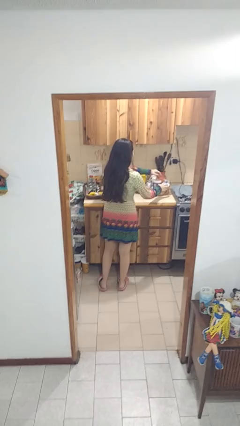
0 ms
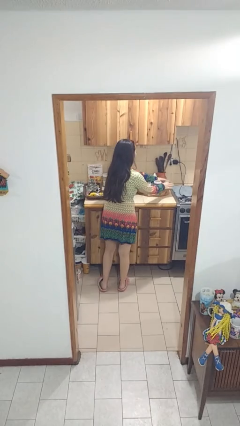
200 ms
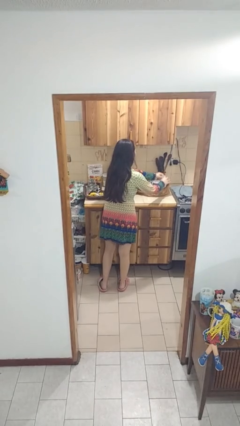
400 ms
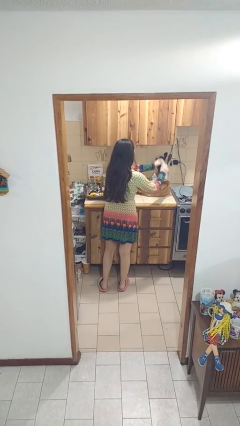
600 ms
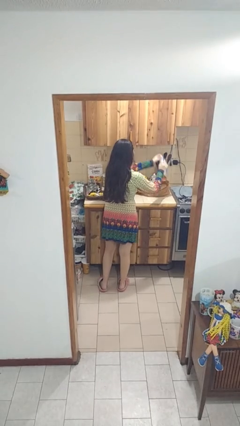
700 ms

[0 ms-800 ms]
person takes object from bag

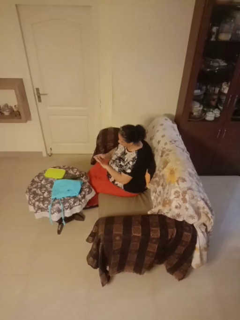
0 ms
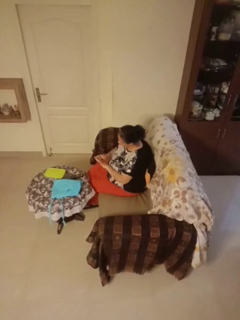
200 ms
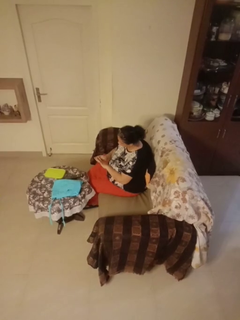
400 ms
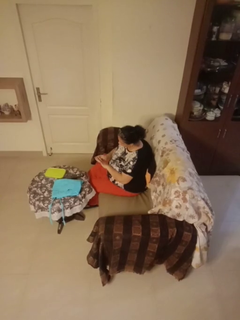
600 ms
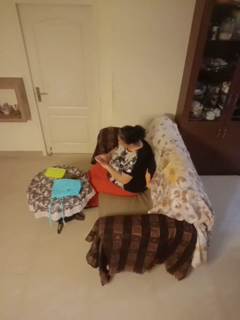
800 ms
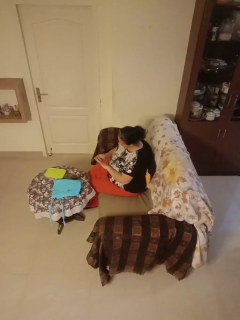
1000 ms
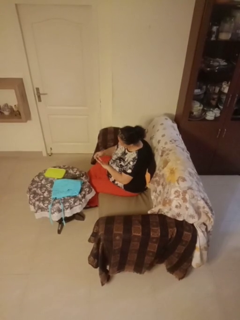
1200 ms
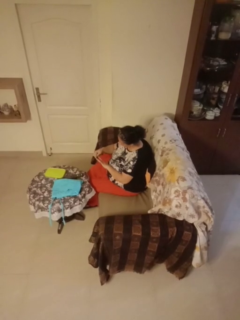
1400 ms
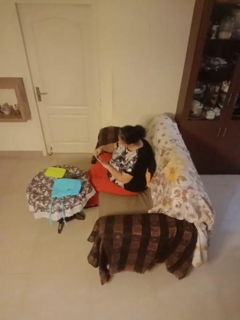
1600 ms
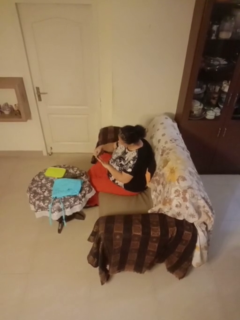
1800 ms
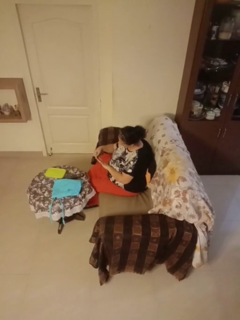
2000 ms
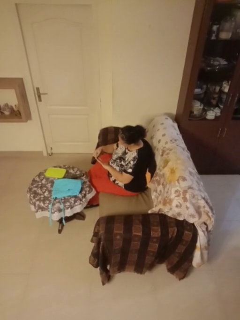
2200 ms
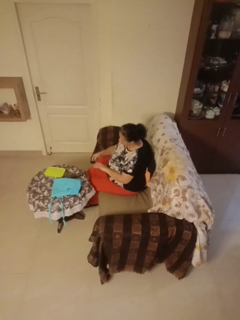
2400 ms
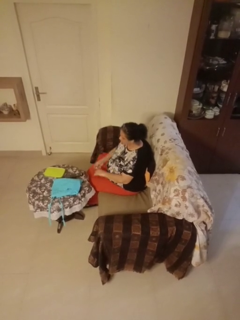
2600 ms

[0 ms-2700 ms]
person files fingernails

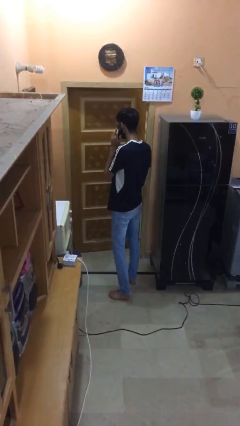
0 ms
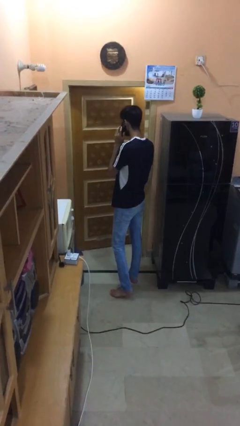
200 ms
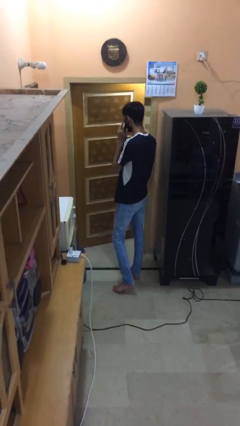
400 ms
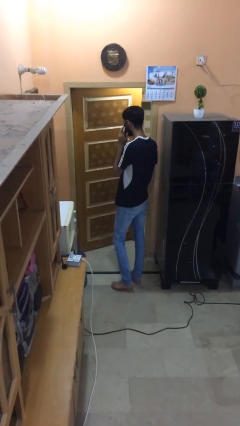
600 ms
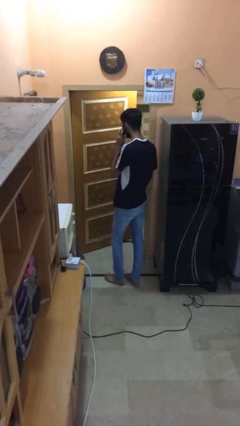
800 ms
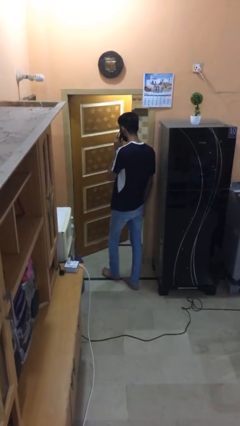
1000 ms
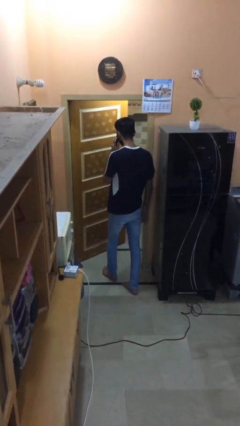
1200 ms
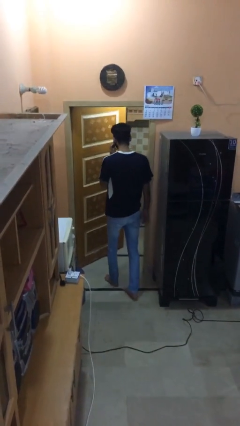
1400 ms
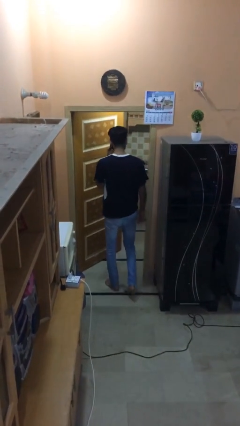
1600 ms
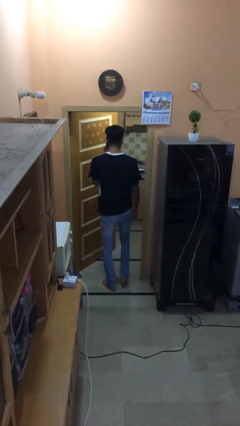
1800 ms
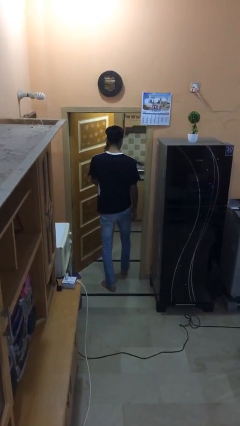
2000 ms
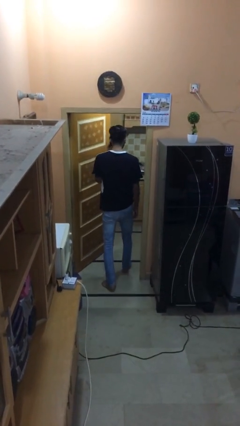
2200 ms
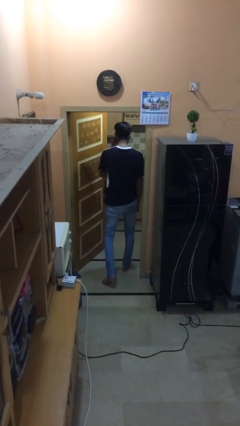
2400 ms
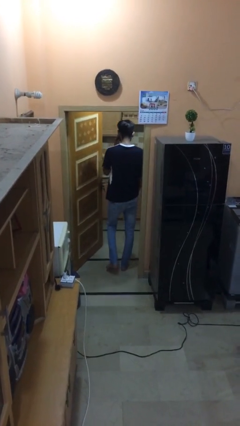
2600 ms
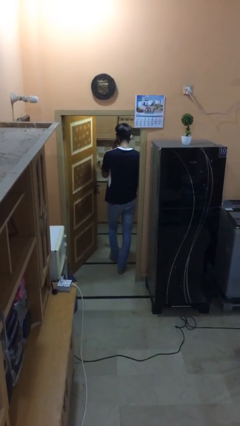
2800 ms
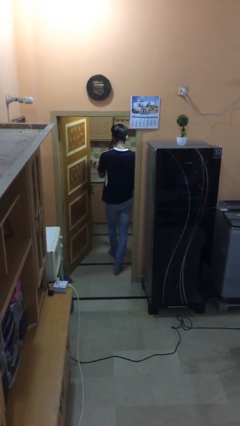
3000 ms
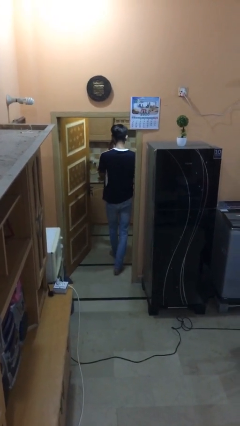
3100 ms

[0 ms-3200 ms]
person exits scene through structure

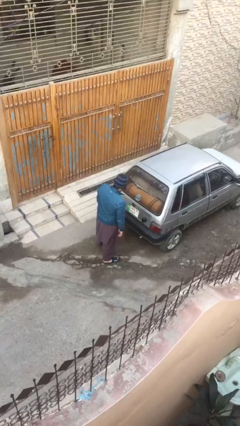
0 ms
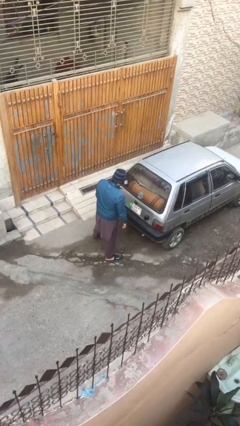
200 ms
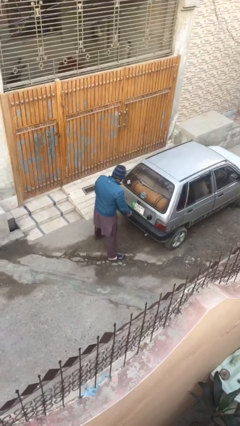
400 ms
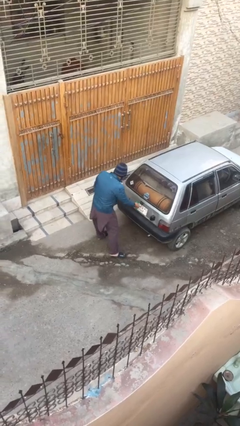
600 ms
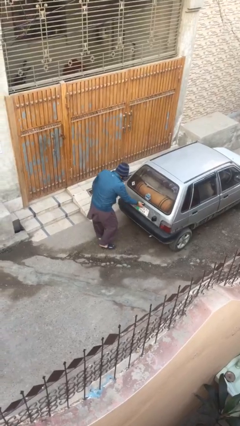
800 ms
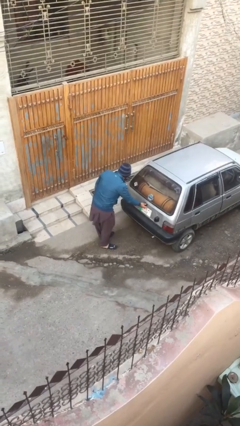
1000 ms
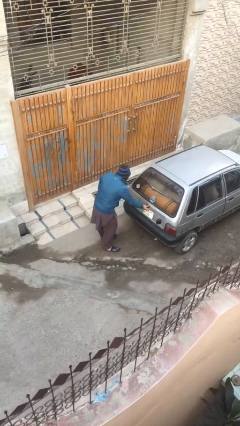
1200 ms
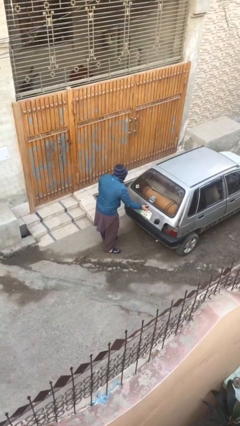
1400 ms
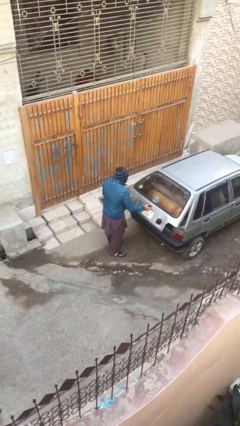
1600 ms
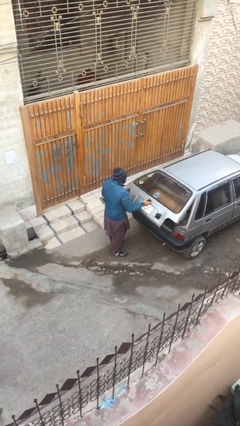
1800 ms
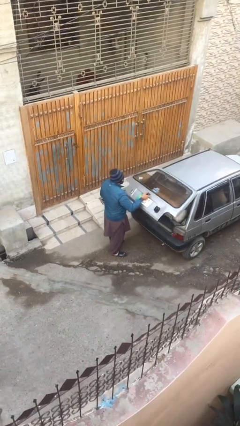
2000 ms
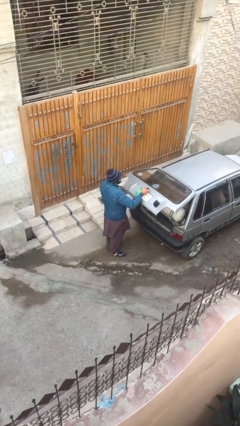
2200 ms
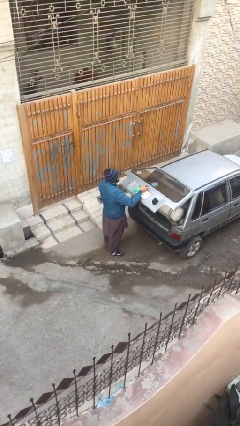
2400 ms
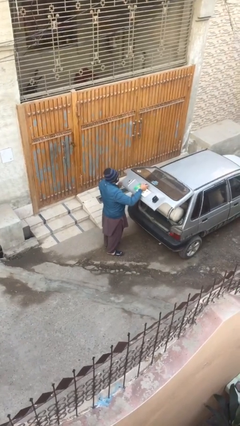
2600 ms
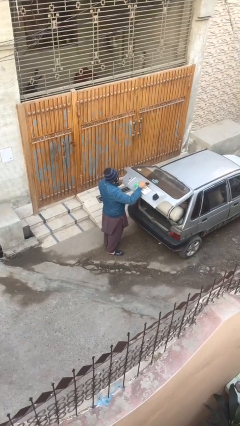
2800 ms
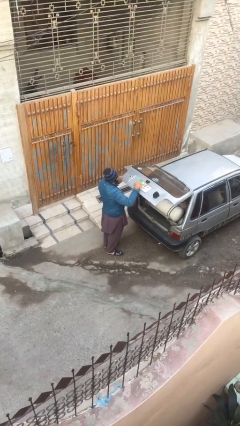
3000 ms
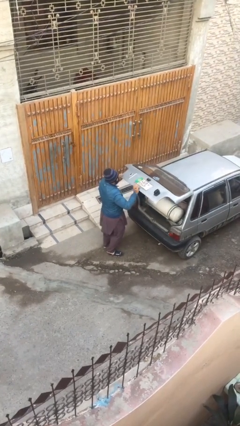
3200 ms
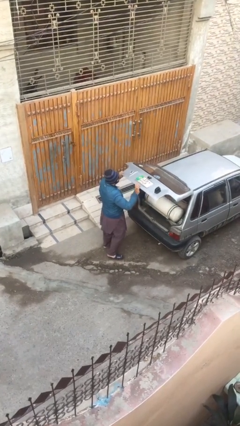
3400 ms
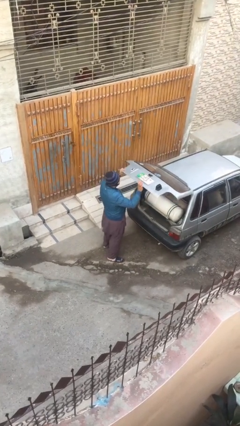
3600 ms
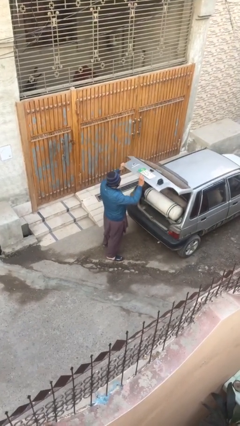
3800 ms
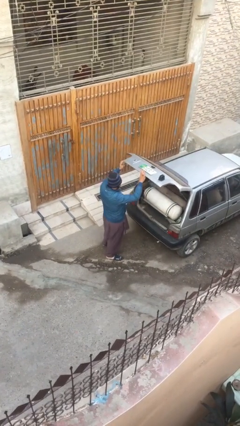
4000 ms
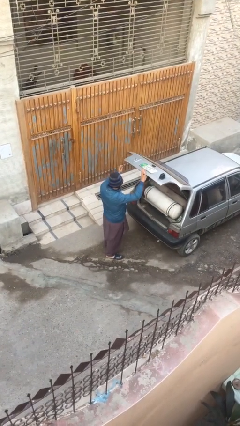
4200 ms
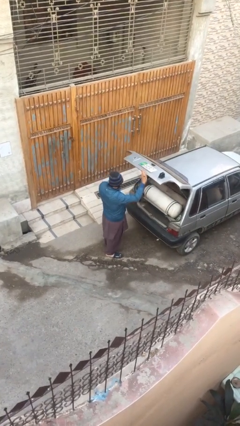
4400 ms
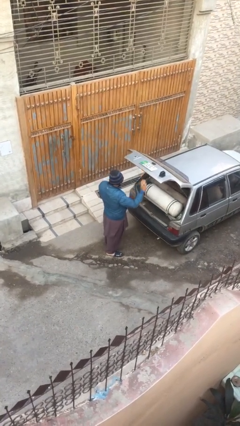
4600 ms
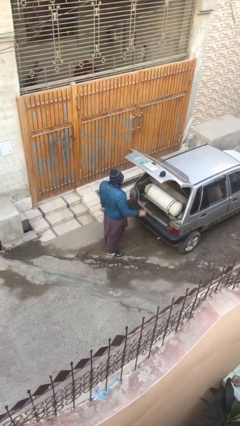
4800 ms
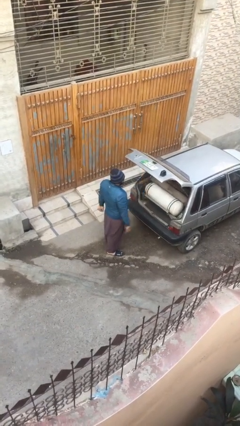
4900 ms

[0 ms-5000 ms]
person opens car trunk

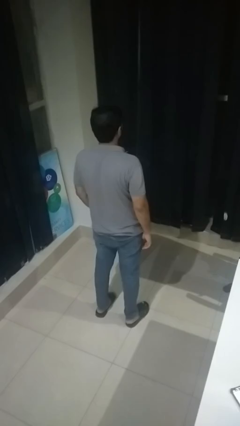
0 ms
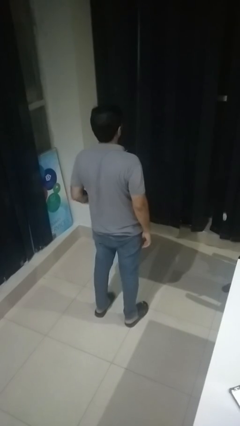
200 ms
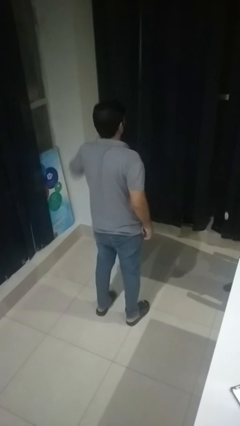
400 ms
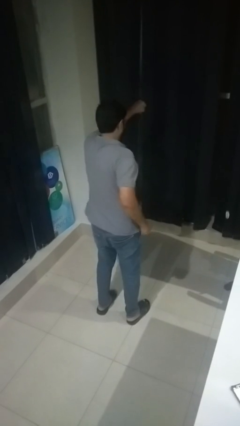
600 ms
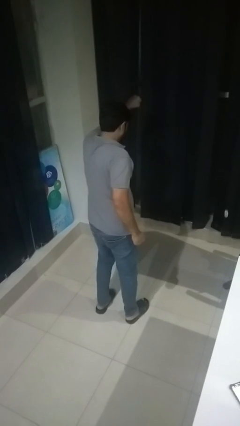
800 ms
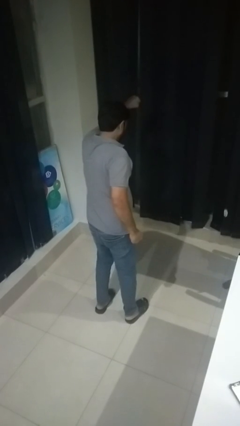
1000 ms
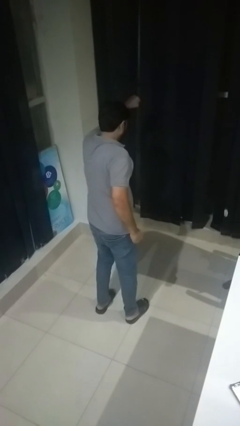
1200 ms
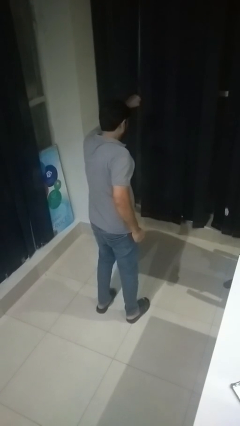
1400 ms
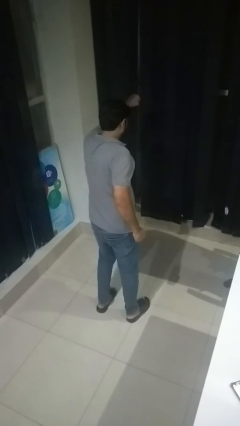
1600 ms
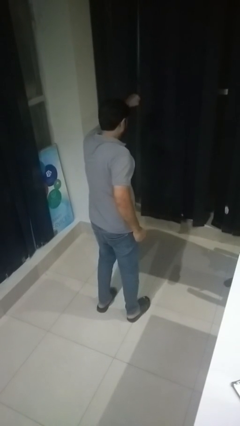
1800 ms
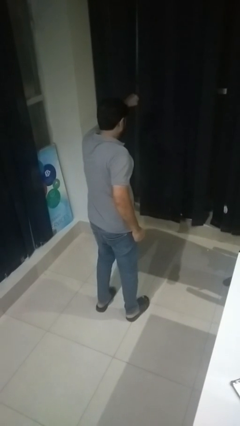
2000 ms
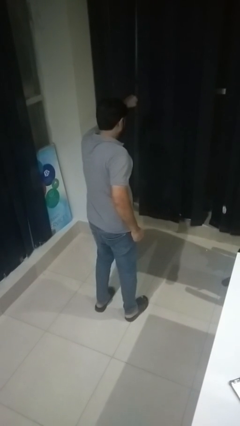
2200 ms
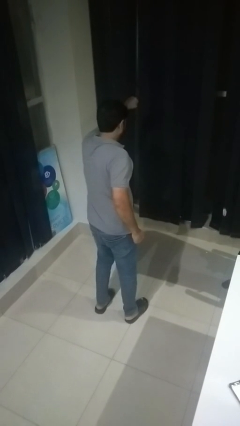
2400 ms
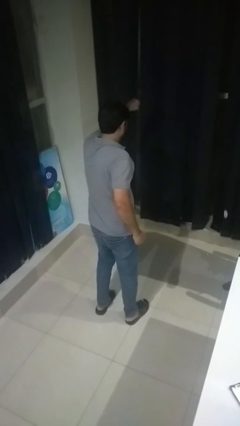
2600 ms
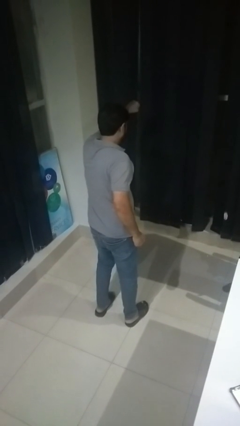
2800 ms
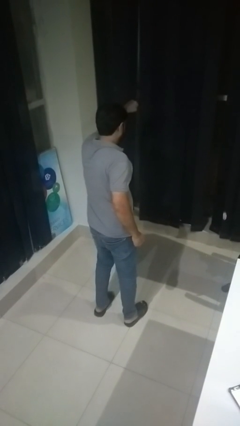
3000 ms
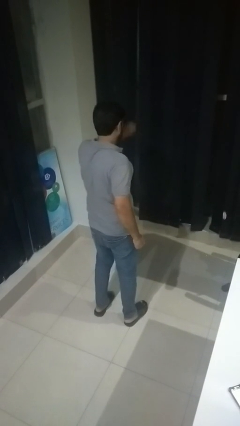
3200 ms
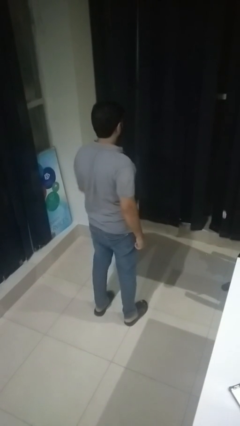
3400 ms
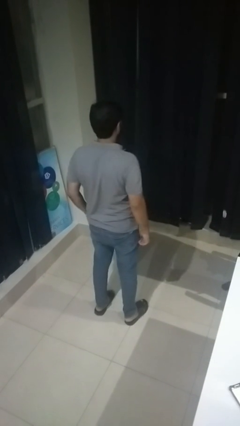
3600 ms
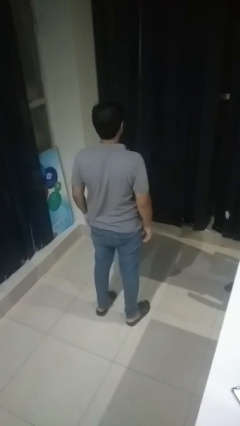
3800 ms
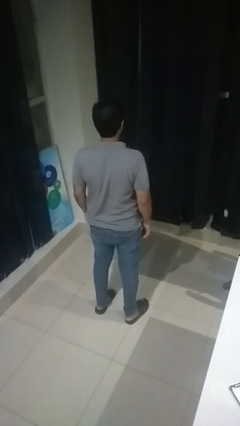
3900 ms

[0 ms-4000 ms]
person punches

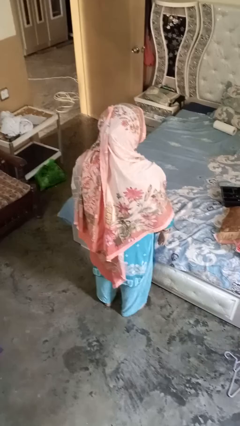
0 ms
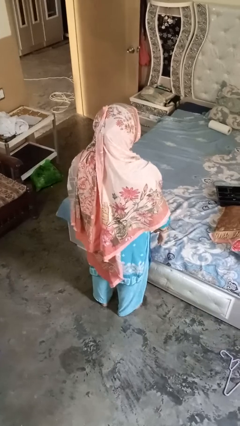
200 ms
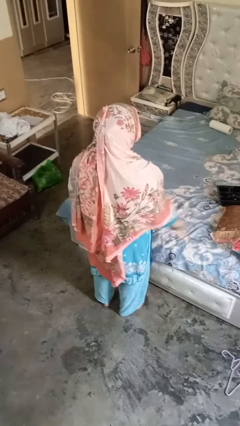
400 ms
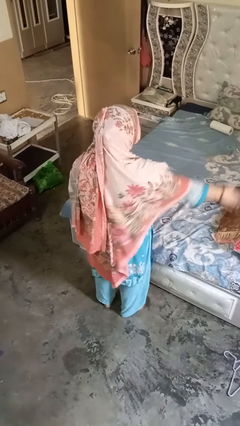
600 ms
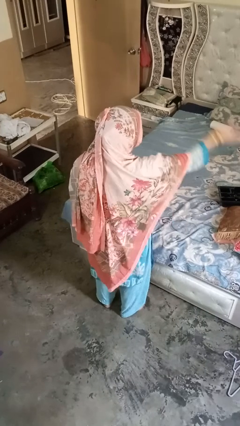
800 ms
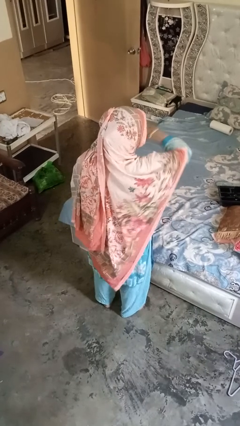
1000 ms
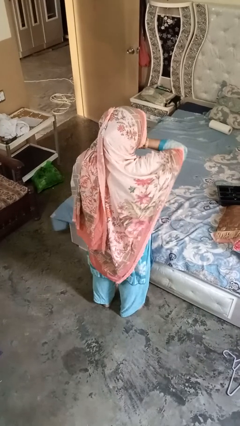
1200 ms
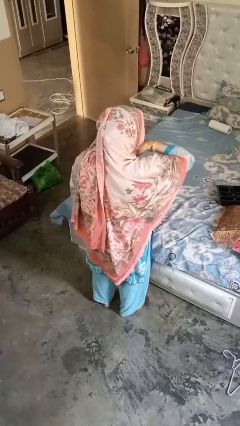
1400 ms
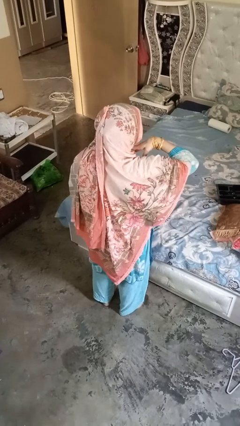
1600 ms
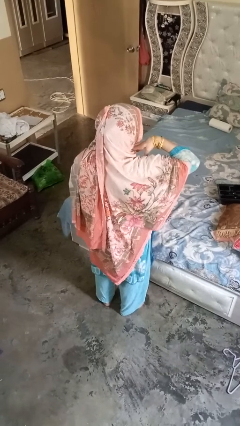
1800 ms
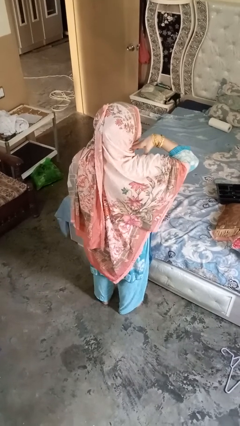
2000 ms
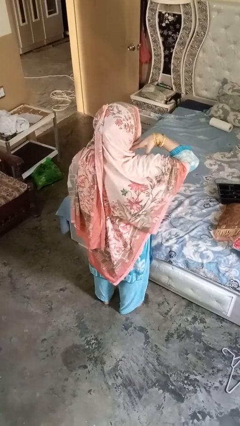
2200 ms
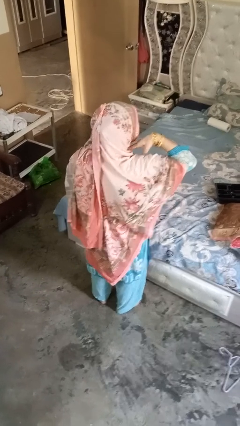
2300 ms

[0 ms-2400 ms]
person gestures cut

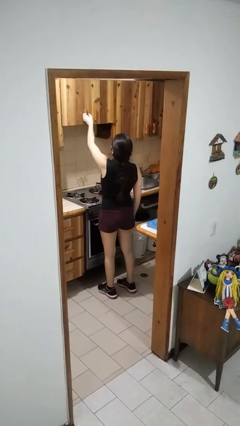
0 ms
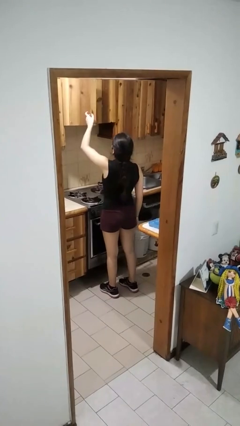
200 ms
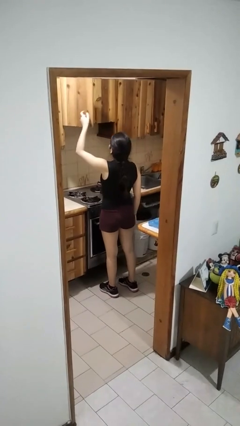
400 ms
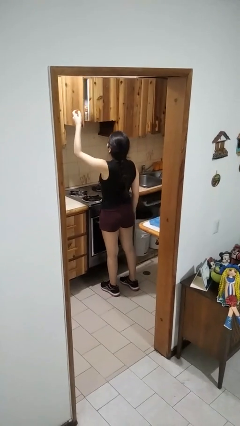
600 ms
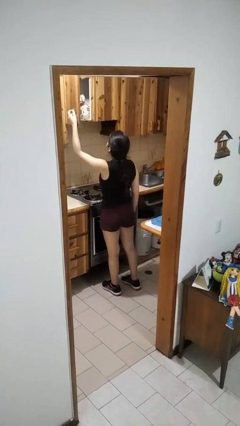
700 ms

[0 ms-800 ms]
person opens cabinet
